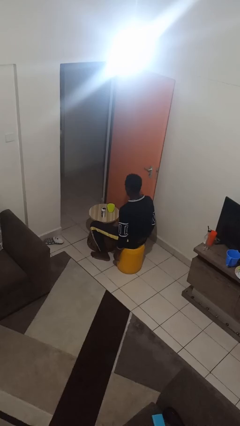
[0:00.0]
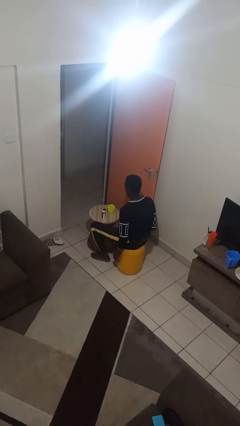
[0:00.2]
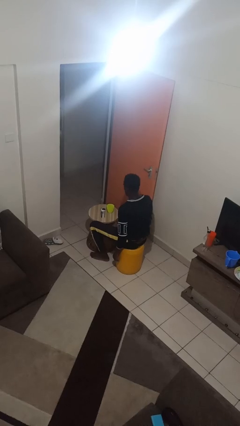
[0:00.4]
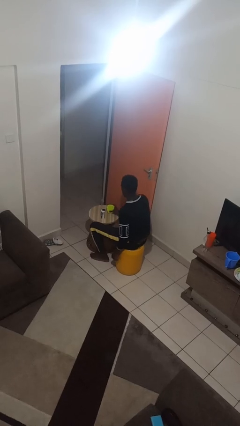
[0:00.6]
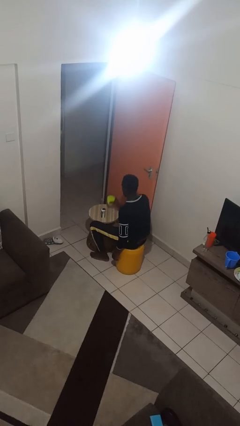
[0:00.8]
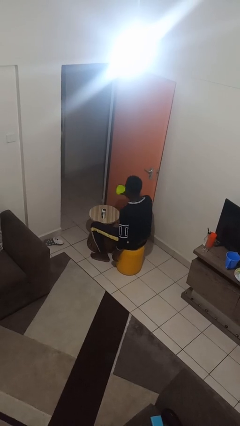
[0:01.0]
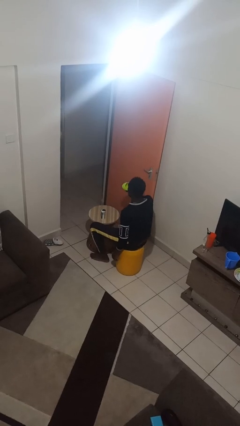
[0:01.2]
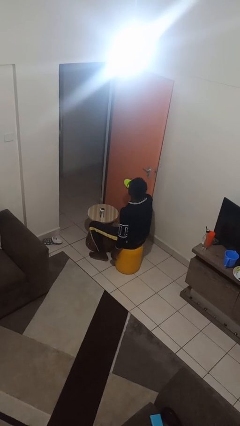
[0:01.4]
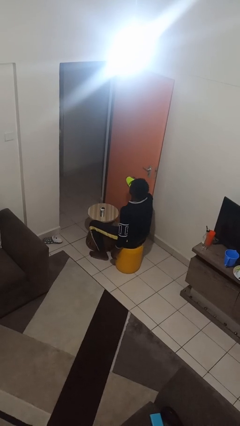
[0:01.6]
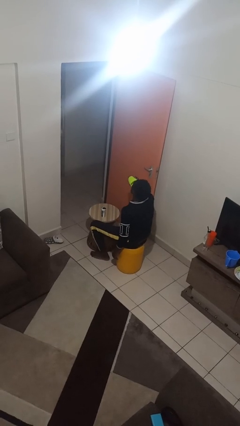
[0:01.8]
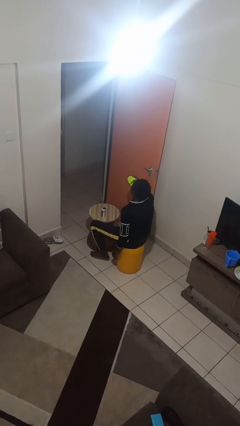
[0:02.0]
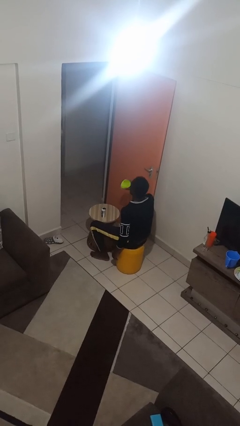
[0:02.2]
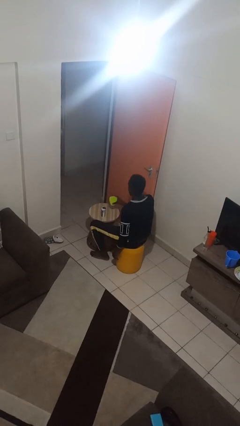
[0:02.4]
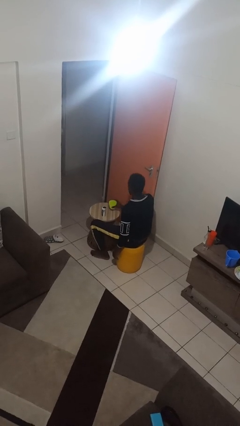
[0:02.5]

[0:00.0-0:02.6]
person drinks from cup

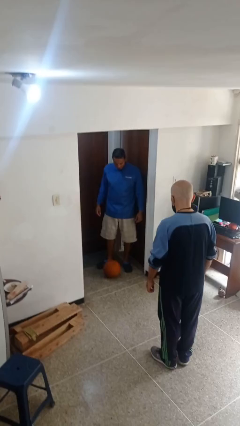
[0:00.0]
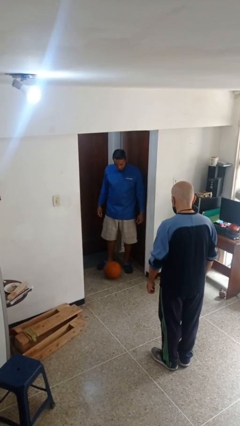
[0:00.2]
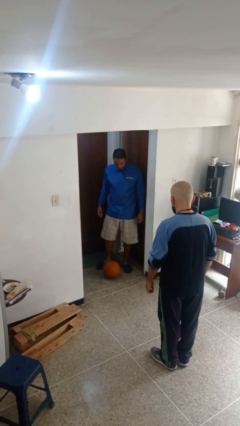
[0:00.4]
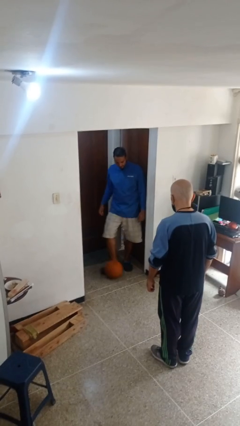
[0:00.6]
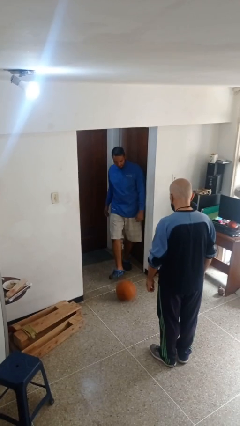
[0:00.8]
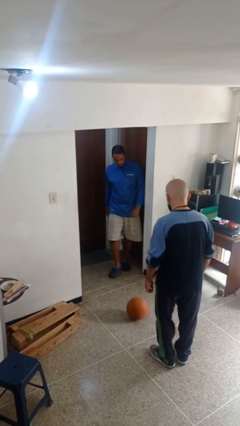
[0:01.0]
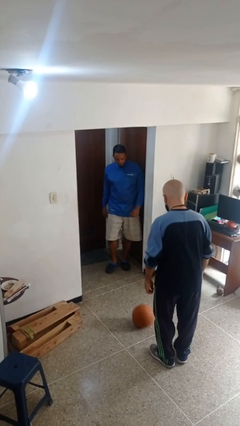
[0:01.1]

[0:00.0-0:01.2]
person kicks object to person

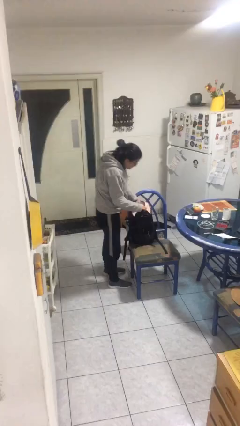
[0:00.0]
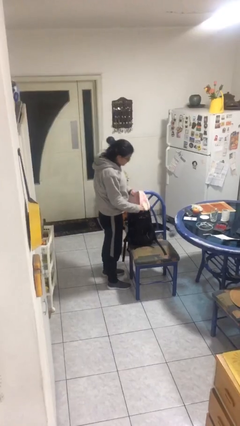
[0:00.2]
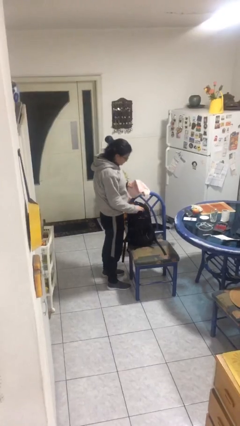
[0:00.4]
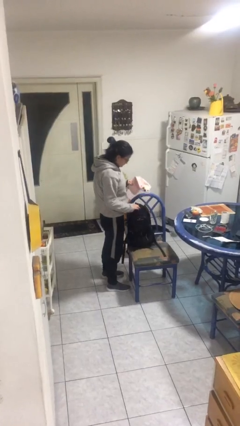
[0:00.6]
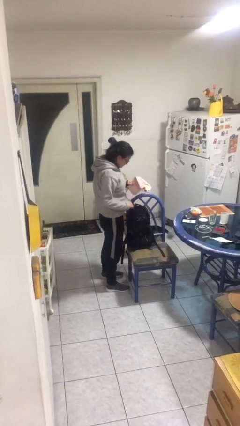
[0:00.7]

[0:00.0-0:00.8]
person takes object from backpack

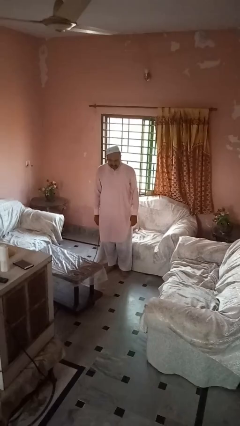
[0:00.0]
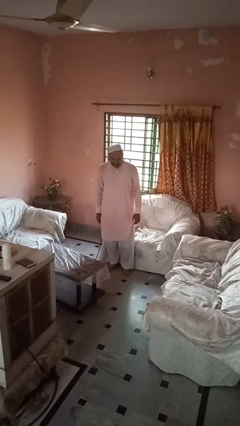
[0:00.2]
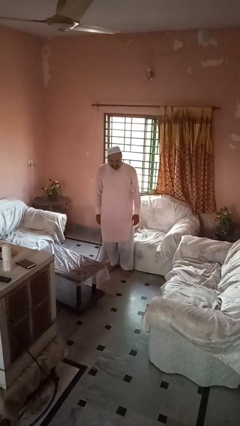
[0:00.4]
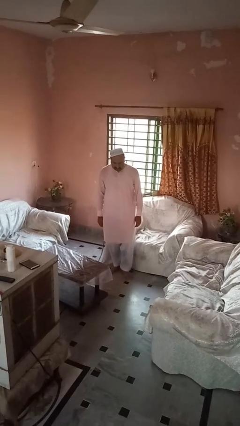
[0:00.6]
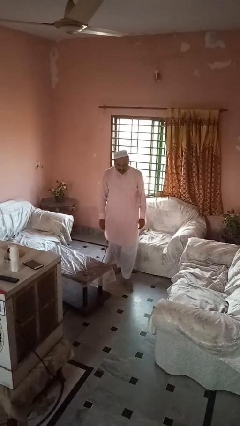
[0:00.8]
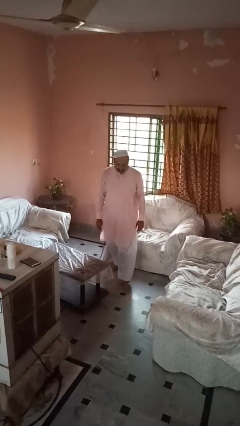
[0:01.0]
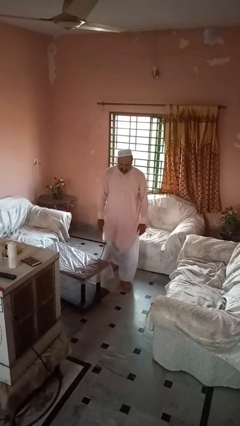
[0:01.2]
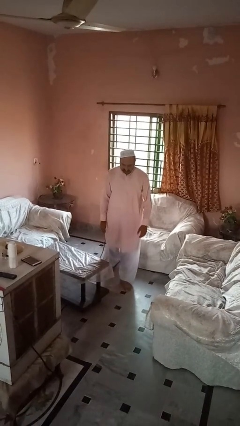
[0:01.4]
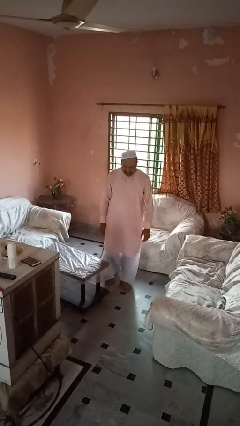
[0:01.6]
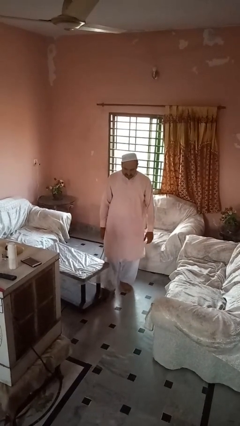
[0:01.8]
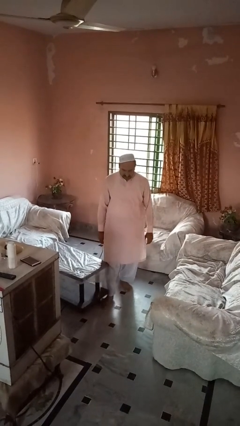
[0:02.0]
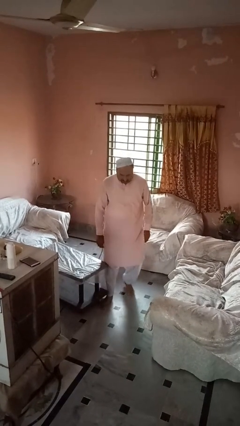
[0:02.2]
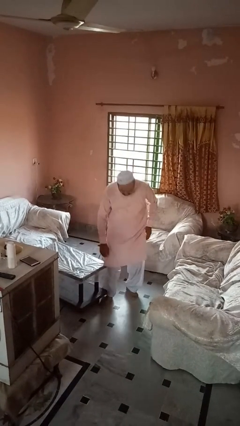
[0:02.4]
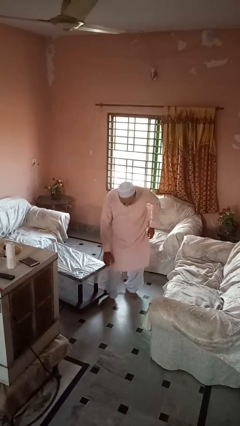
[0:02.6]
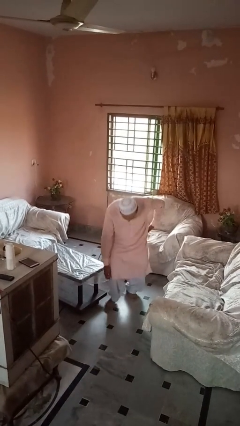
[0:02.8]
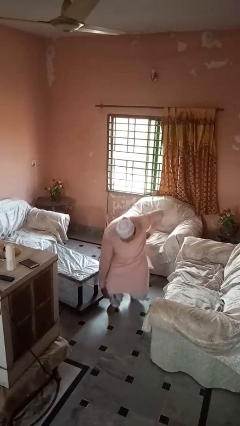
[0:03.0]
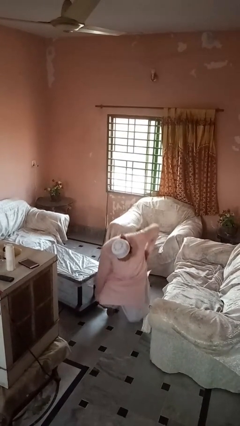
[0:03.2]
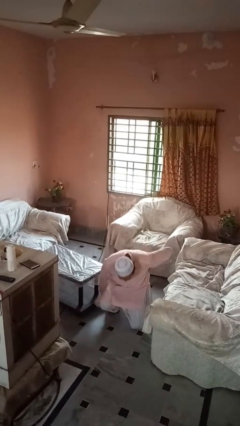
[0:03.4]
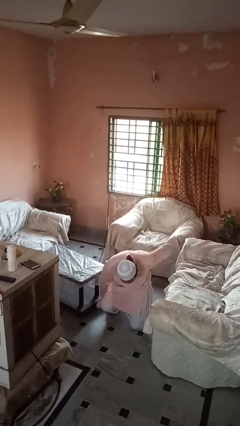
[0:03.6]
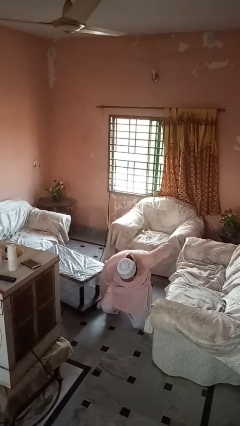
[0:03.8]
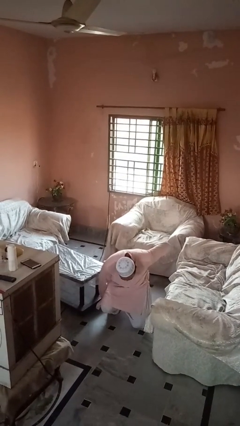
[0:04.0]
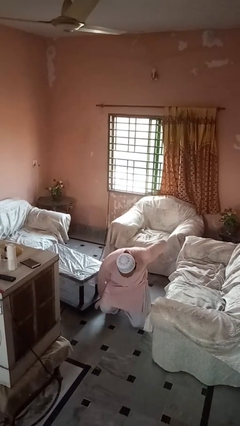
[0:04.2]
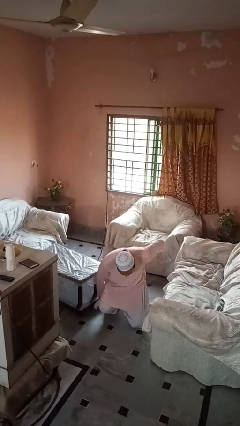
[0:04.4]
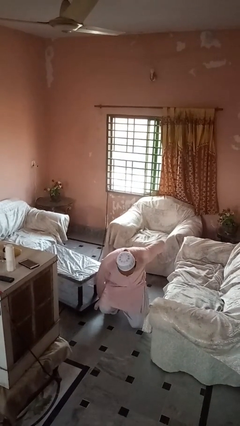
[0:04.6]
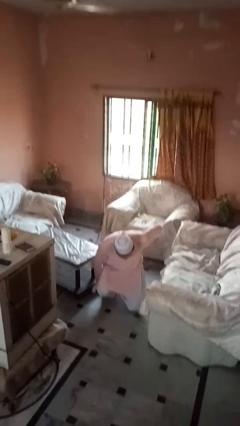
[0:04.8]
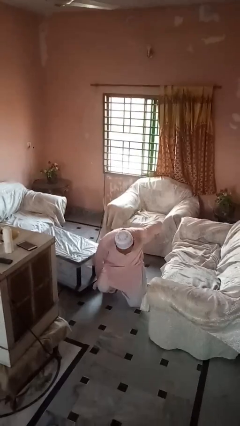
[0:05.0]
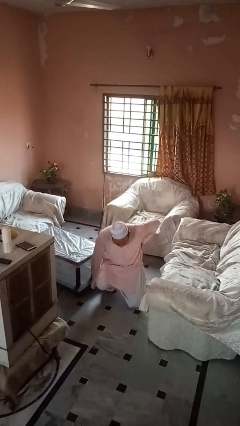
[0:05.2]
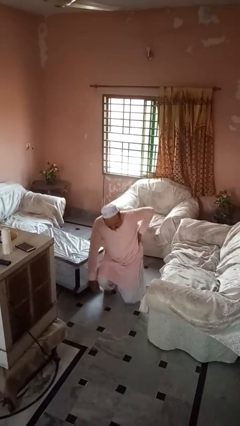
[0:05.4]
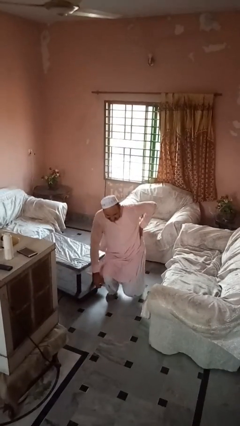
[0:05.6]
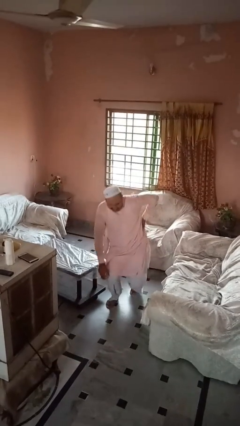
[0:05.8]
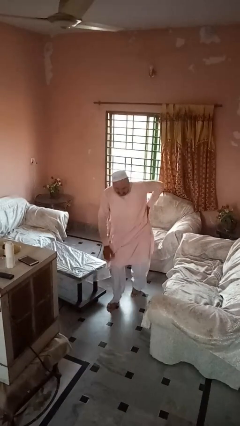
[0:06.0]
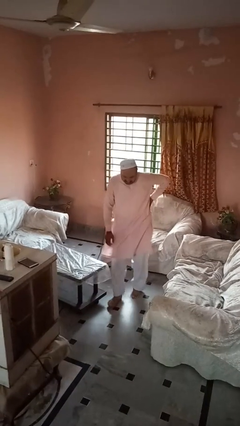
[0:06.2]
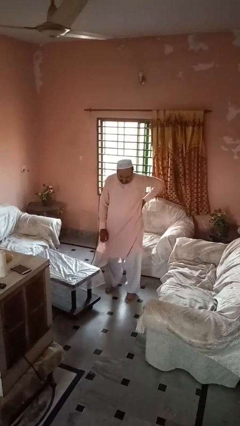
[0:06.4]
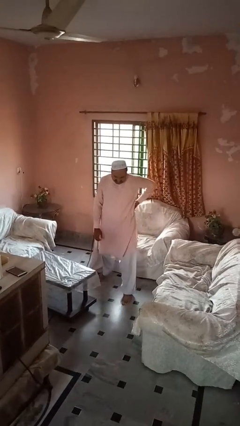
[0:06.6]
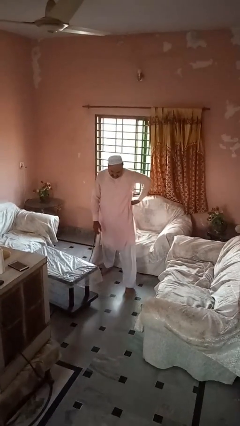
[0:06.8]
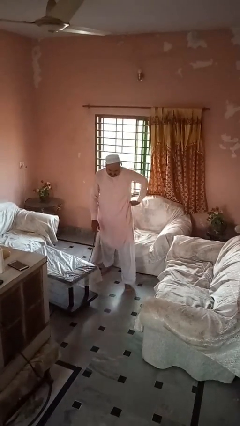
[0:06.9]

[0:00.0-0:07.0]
person bumps into table

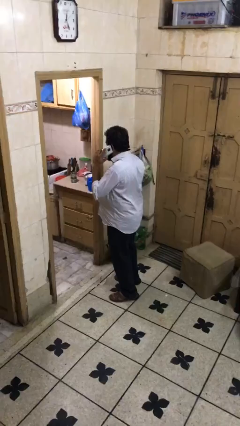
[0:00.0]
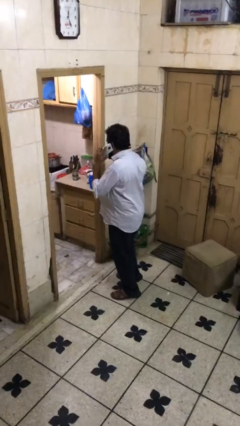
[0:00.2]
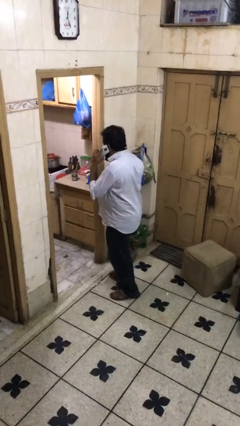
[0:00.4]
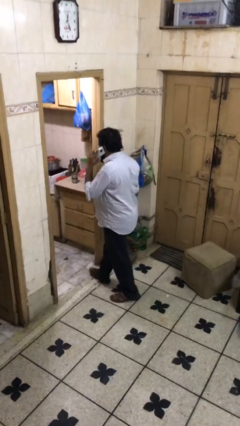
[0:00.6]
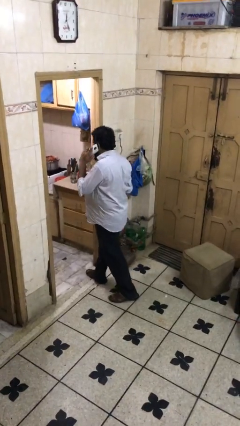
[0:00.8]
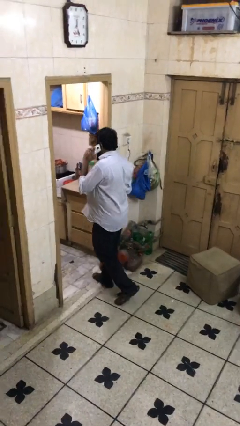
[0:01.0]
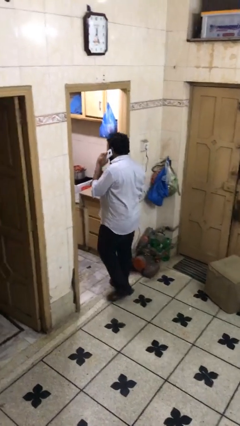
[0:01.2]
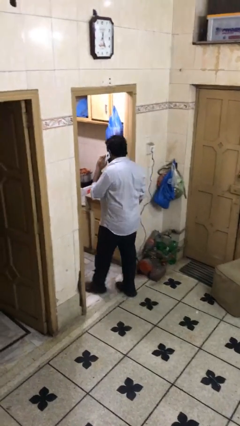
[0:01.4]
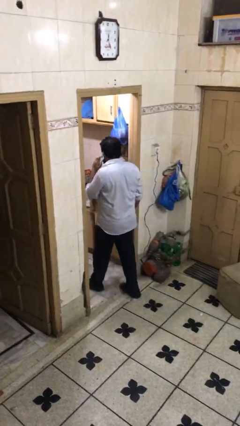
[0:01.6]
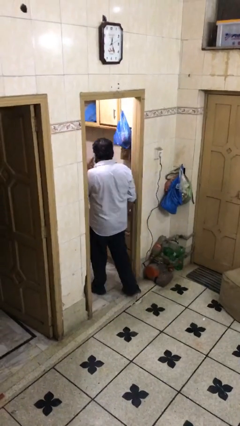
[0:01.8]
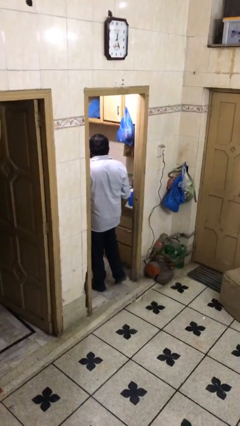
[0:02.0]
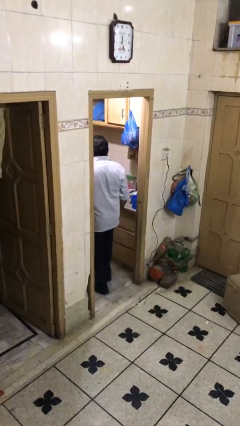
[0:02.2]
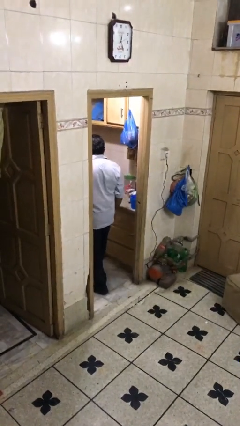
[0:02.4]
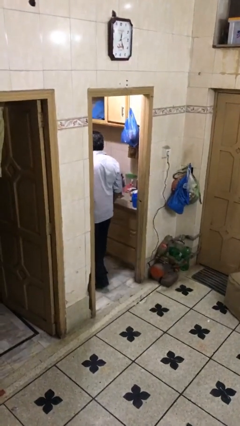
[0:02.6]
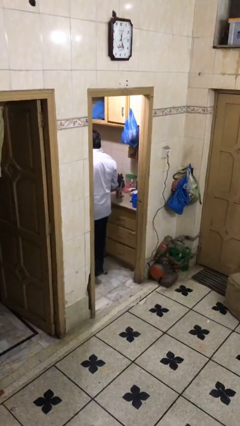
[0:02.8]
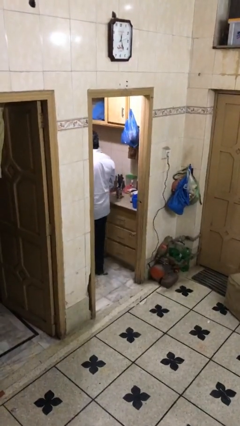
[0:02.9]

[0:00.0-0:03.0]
person exits scene through structure

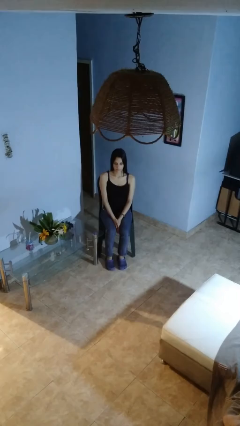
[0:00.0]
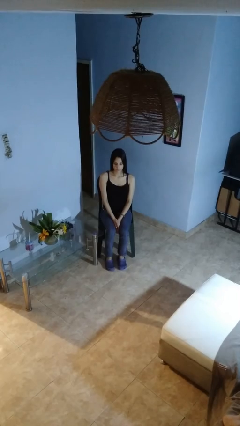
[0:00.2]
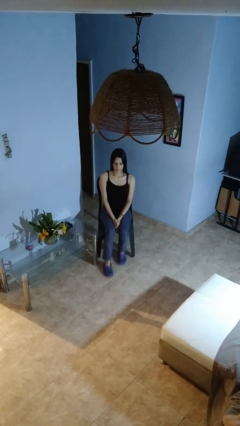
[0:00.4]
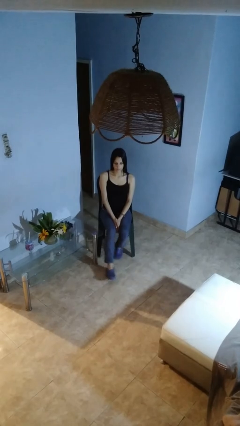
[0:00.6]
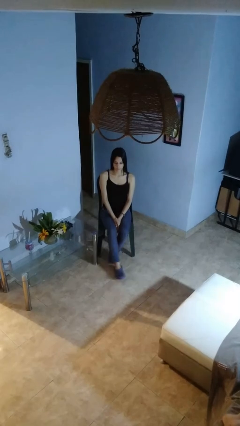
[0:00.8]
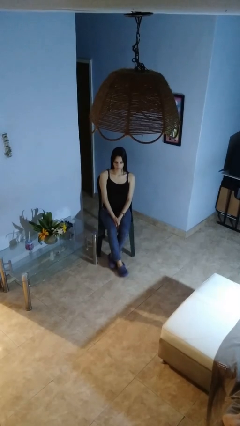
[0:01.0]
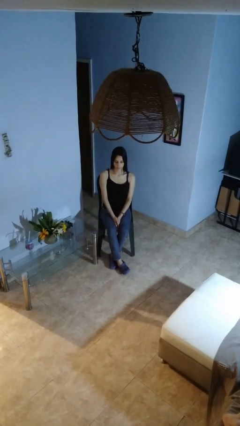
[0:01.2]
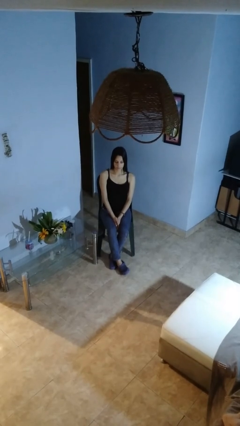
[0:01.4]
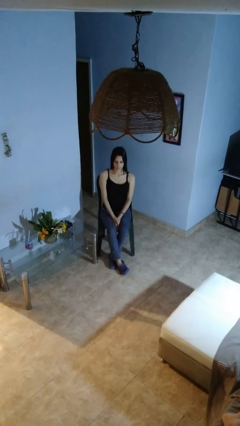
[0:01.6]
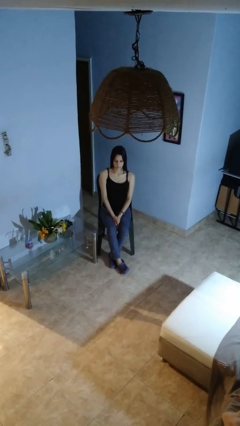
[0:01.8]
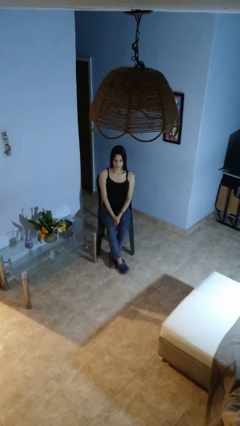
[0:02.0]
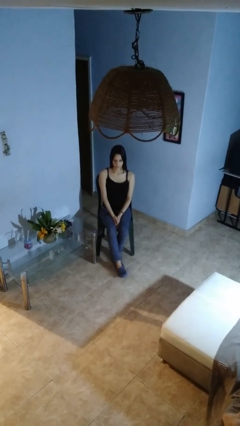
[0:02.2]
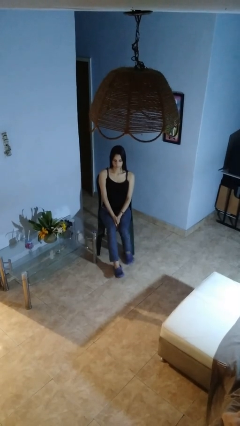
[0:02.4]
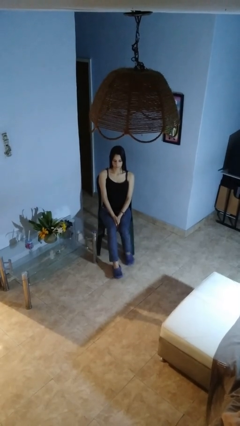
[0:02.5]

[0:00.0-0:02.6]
person crosses legs
